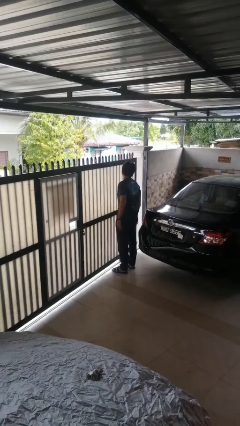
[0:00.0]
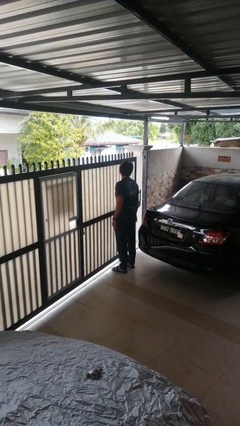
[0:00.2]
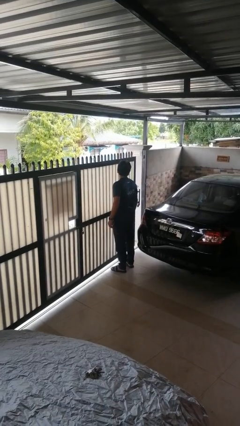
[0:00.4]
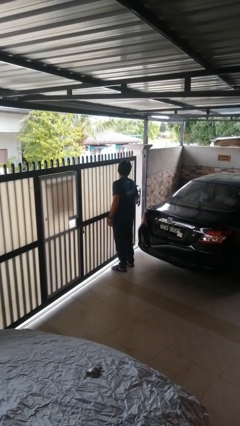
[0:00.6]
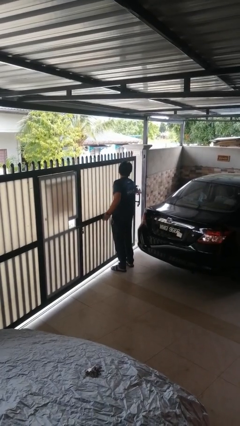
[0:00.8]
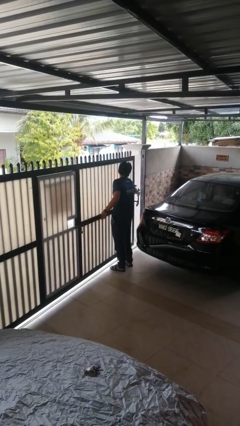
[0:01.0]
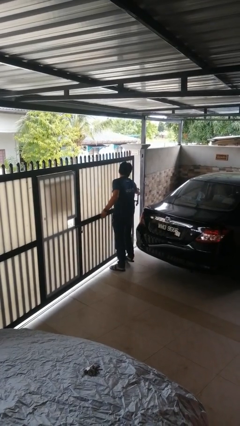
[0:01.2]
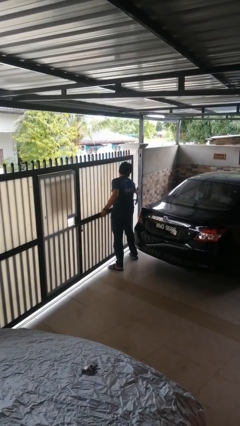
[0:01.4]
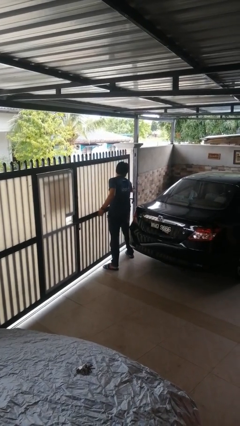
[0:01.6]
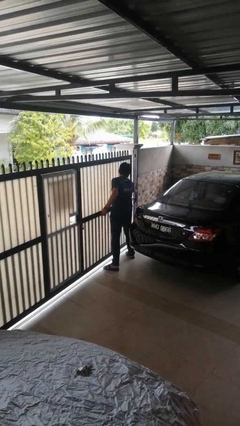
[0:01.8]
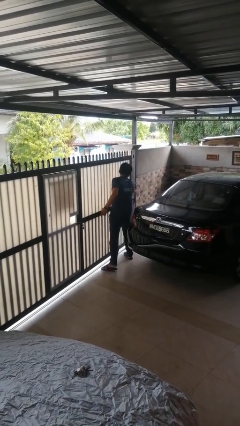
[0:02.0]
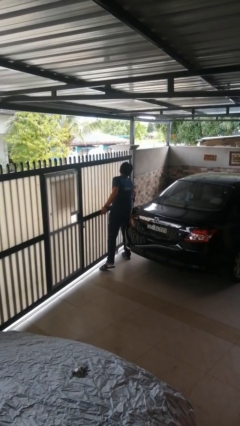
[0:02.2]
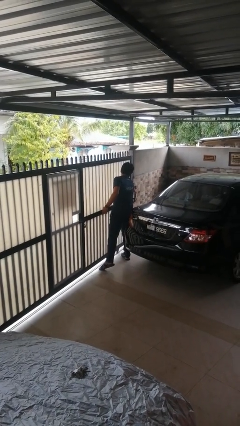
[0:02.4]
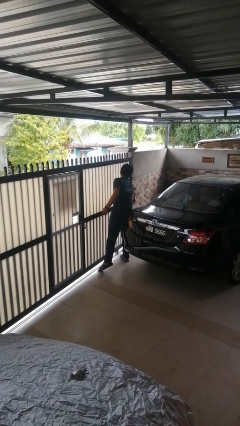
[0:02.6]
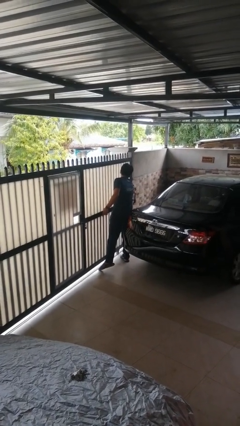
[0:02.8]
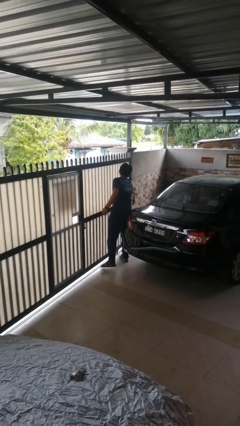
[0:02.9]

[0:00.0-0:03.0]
person closes sliding door

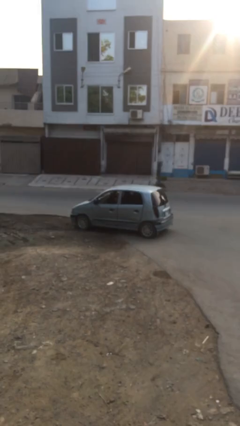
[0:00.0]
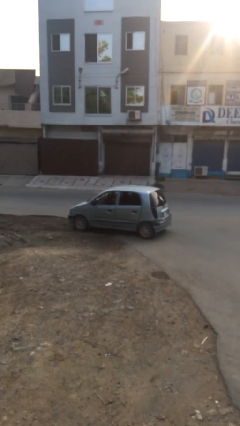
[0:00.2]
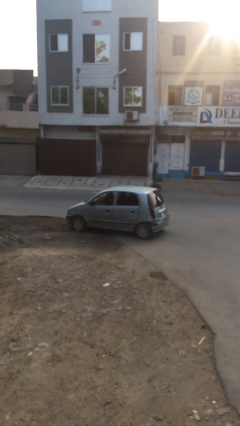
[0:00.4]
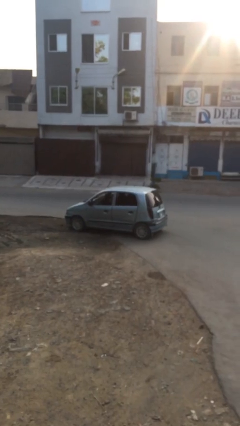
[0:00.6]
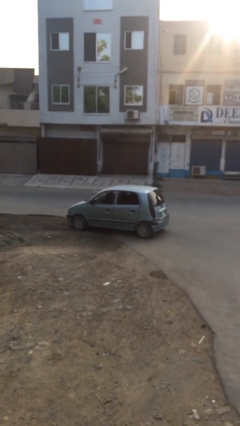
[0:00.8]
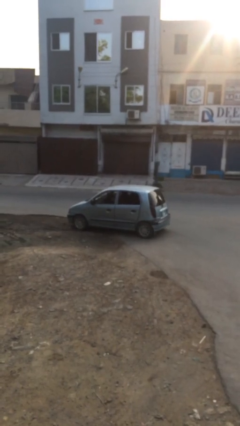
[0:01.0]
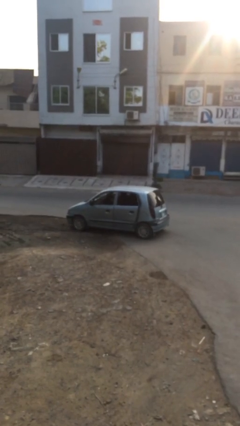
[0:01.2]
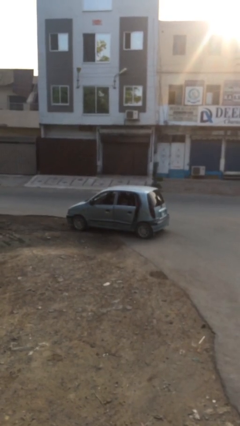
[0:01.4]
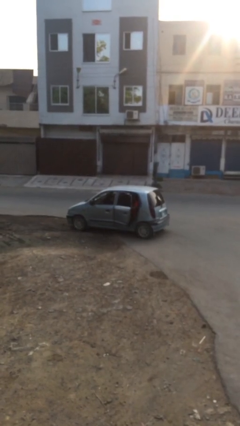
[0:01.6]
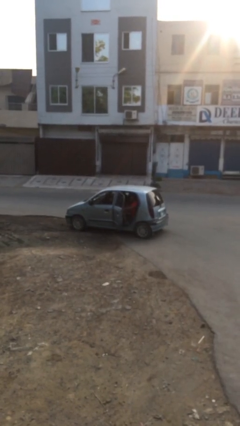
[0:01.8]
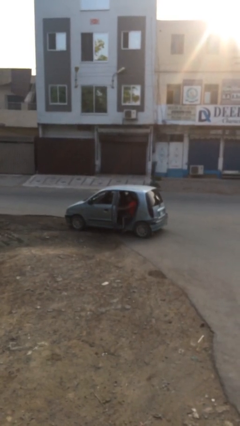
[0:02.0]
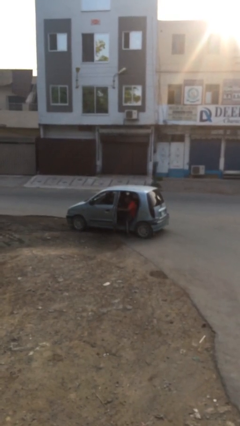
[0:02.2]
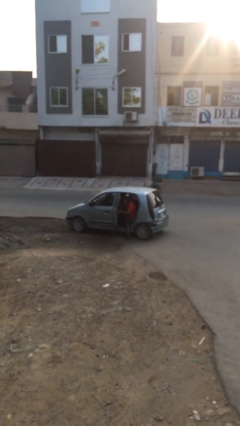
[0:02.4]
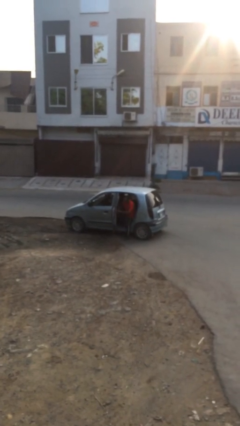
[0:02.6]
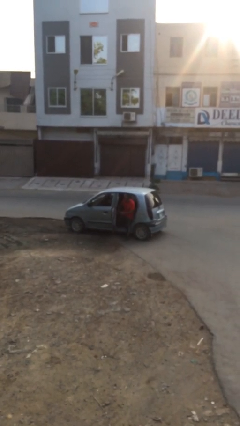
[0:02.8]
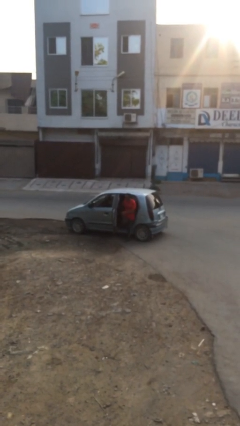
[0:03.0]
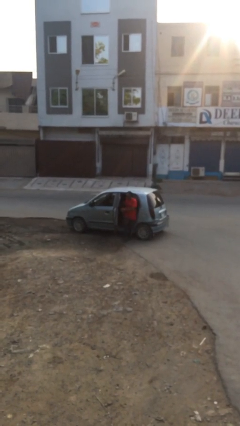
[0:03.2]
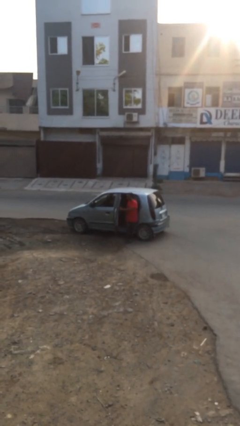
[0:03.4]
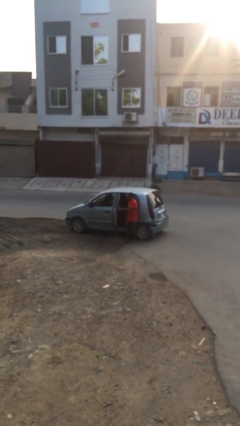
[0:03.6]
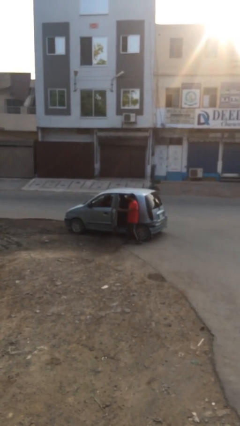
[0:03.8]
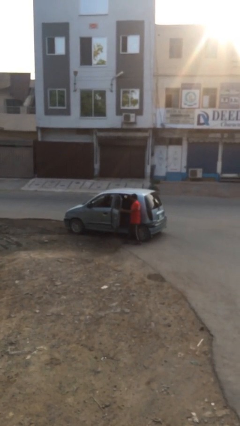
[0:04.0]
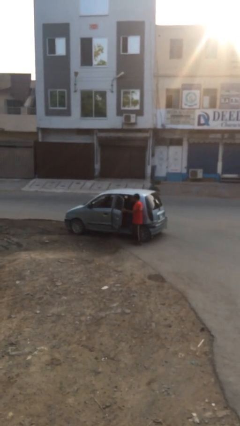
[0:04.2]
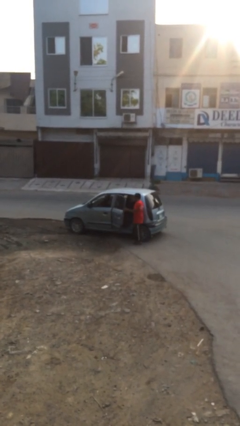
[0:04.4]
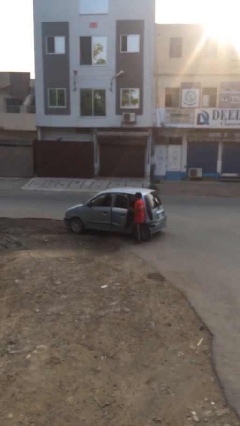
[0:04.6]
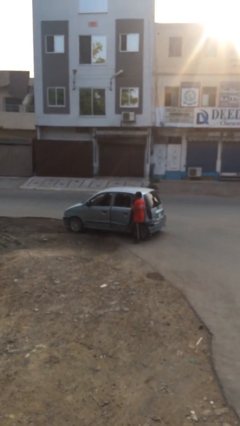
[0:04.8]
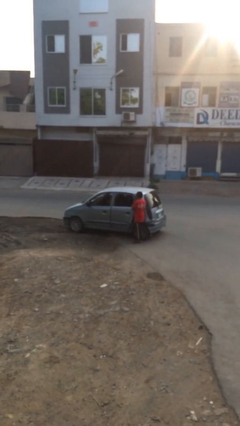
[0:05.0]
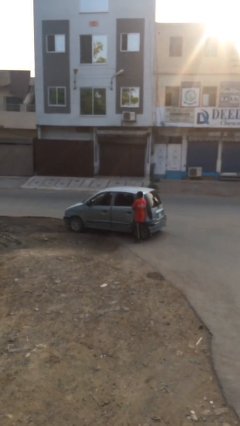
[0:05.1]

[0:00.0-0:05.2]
car drops off person

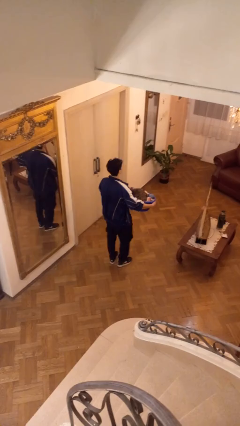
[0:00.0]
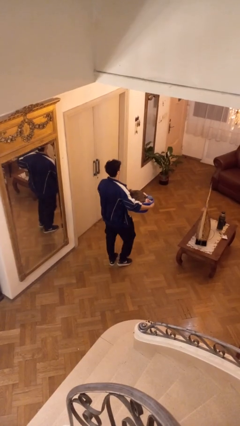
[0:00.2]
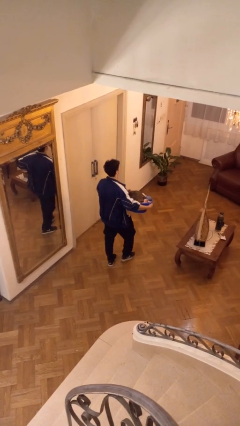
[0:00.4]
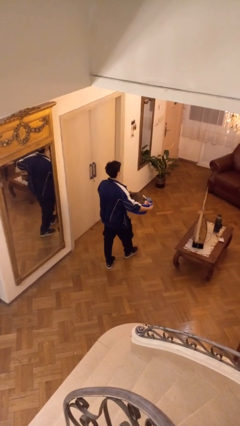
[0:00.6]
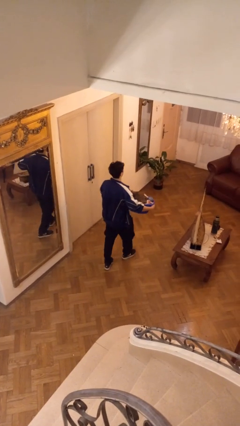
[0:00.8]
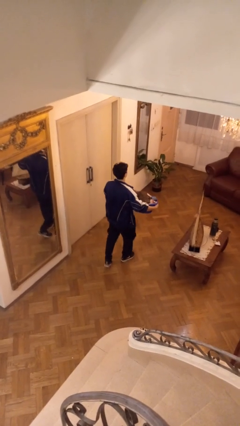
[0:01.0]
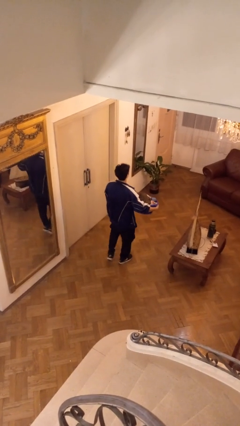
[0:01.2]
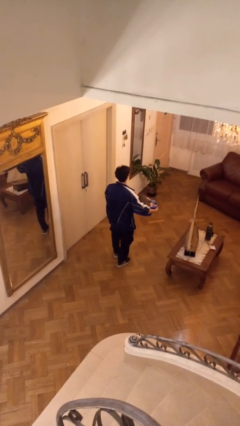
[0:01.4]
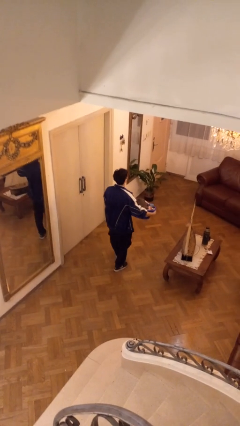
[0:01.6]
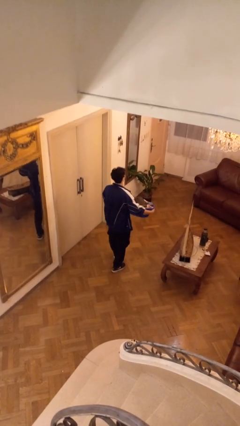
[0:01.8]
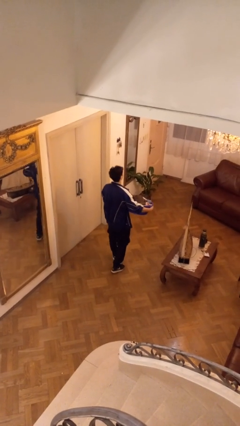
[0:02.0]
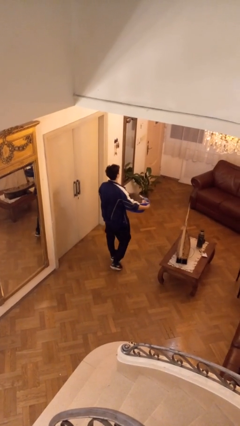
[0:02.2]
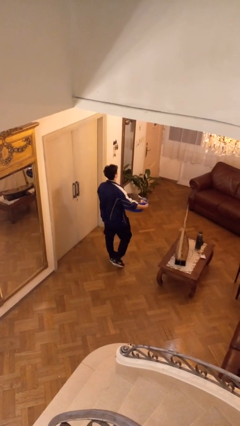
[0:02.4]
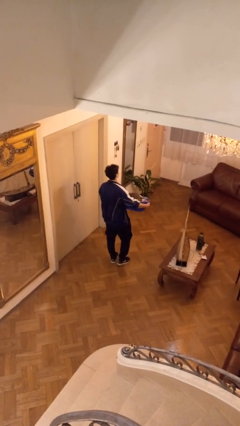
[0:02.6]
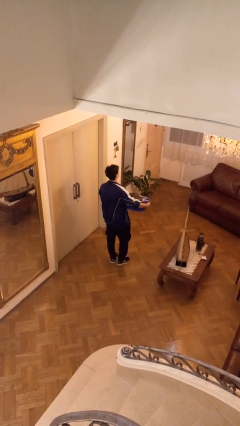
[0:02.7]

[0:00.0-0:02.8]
person carries laundry basket

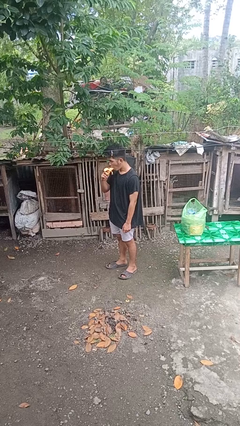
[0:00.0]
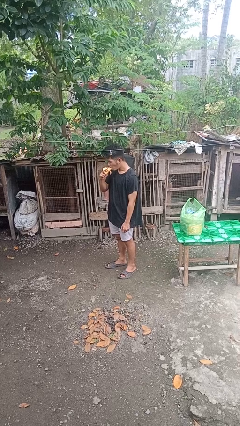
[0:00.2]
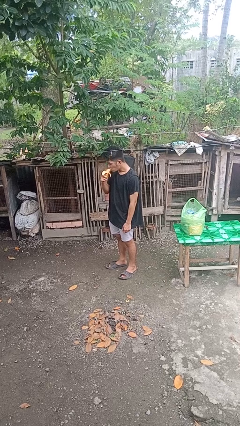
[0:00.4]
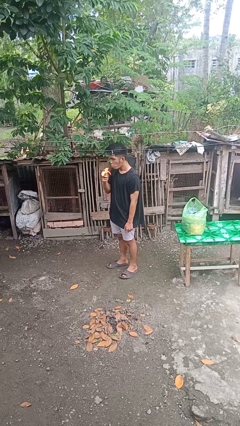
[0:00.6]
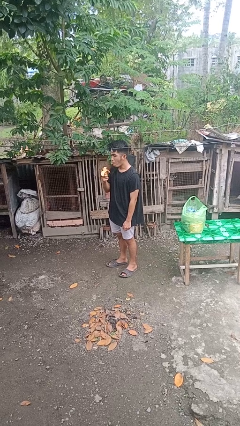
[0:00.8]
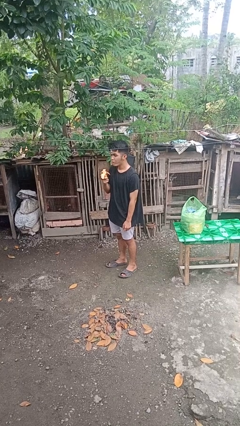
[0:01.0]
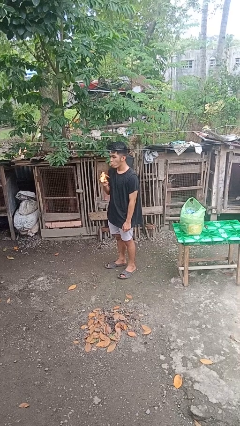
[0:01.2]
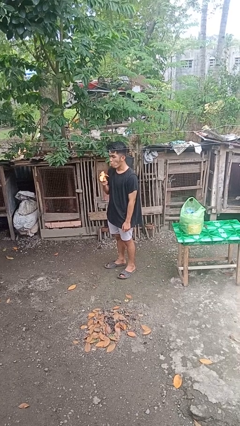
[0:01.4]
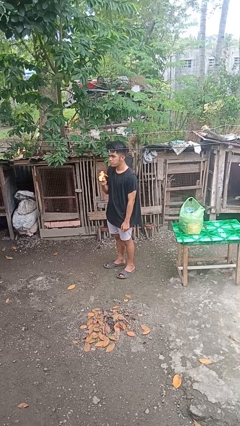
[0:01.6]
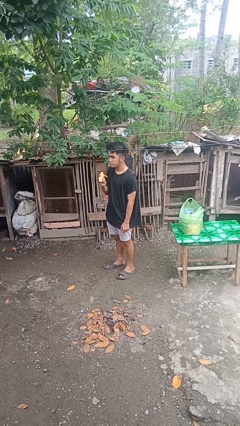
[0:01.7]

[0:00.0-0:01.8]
person eats banana

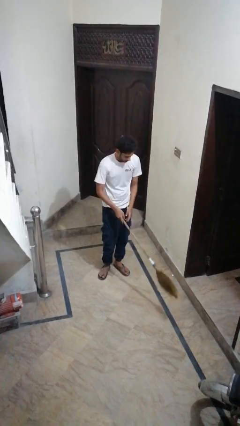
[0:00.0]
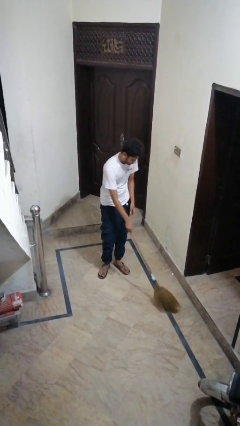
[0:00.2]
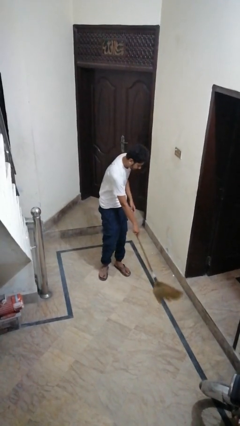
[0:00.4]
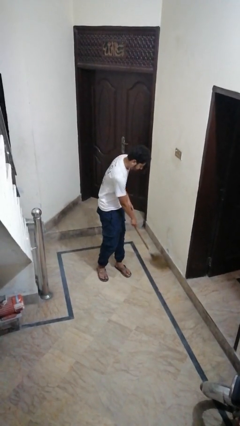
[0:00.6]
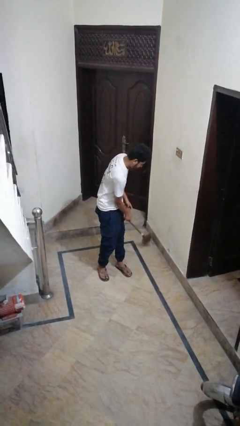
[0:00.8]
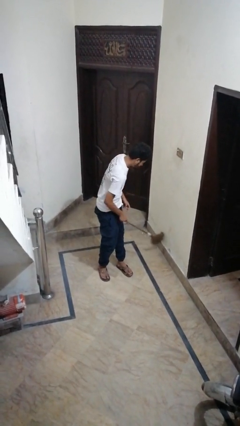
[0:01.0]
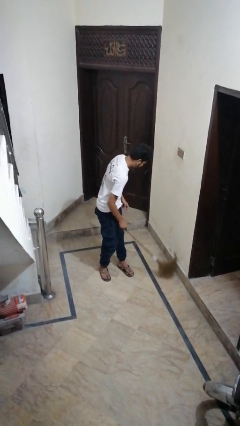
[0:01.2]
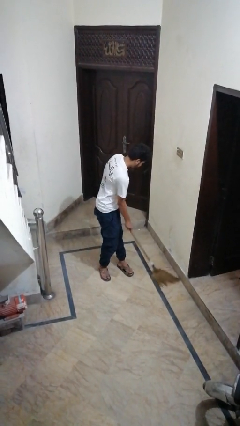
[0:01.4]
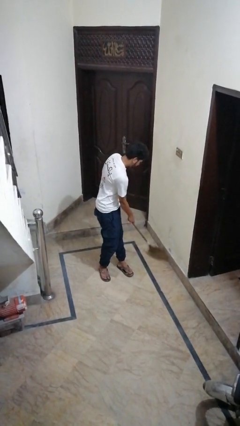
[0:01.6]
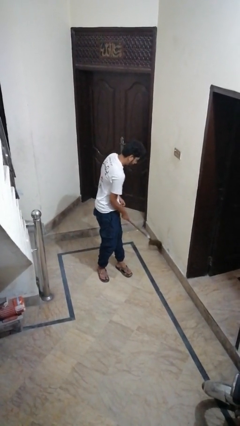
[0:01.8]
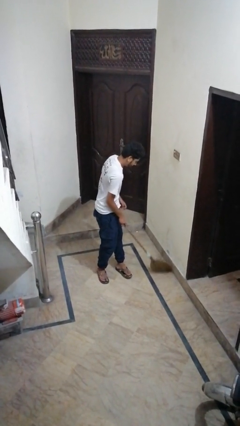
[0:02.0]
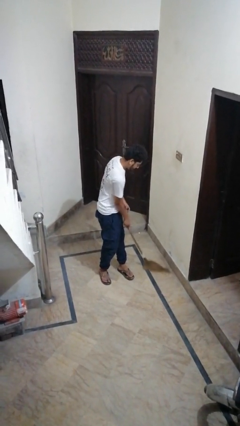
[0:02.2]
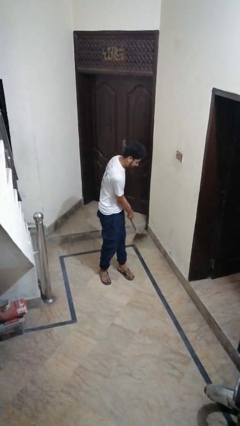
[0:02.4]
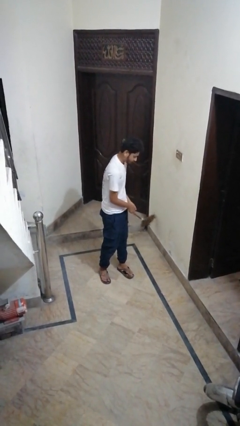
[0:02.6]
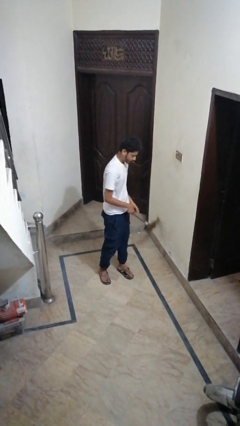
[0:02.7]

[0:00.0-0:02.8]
person sweeps floor

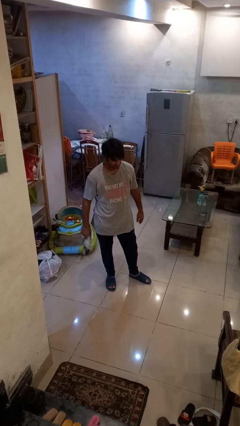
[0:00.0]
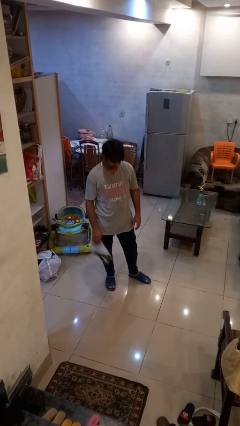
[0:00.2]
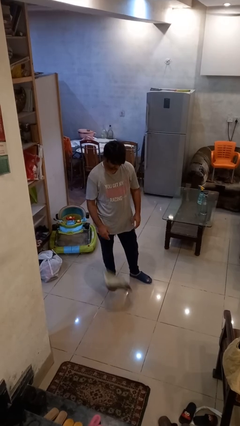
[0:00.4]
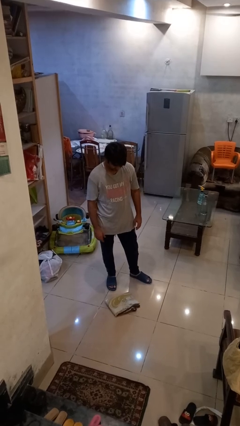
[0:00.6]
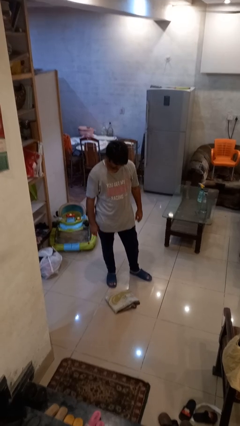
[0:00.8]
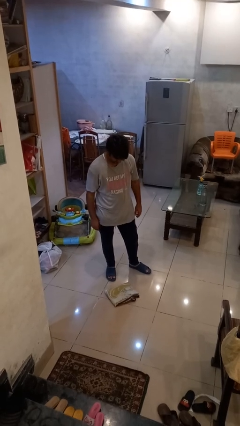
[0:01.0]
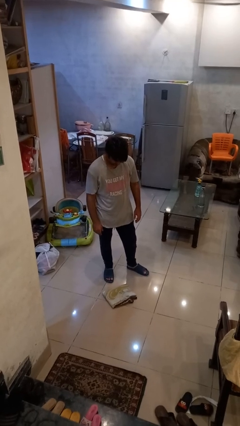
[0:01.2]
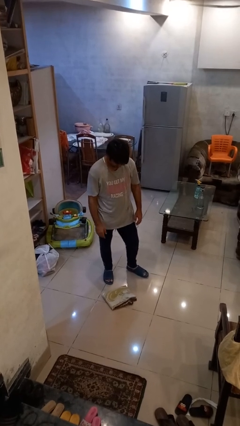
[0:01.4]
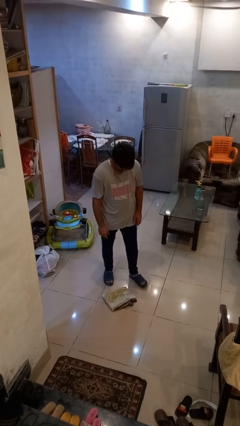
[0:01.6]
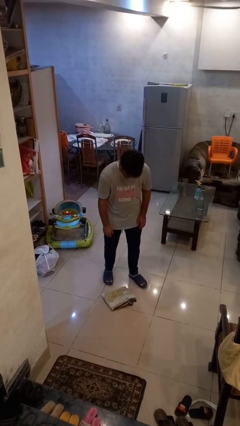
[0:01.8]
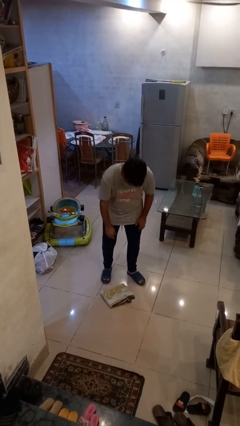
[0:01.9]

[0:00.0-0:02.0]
person drops object
